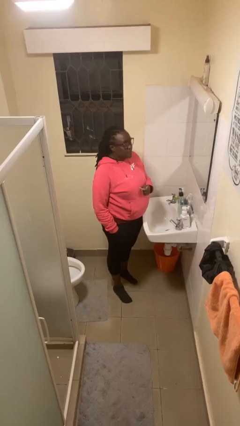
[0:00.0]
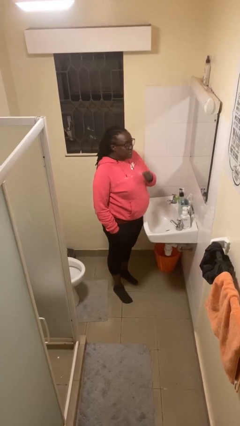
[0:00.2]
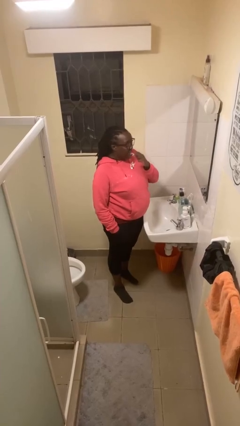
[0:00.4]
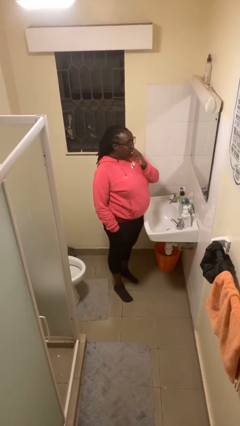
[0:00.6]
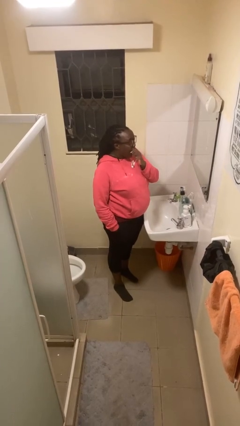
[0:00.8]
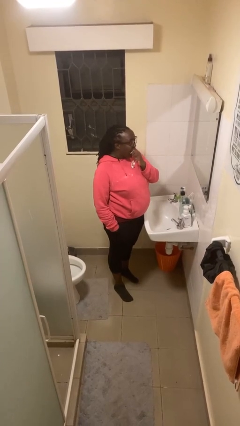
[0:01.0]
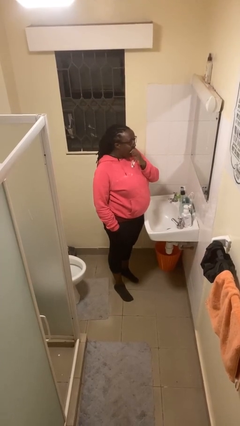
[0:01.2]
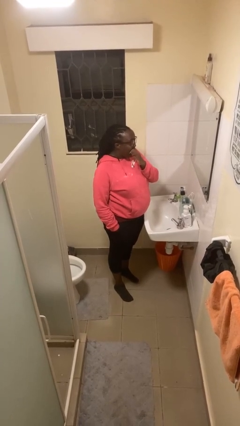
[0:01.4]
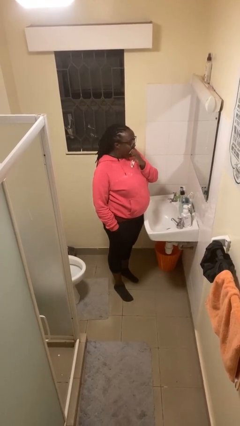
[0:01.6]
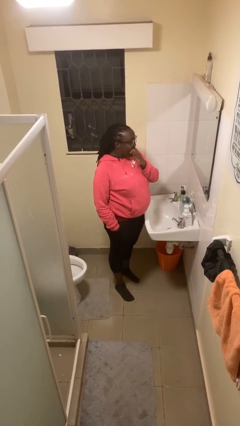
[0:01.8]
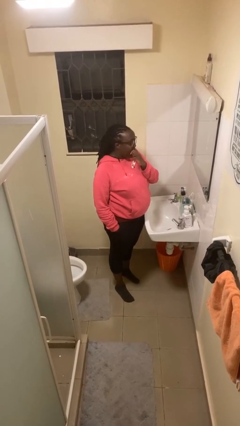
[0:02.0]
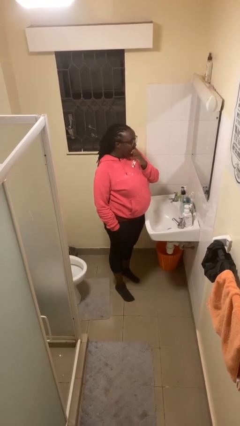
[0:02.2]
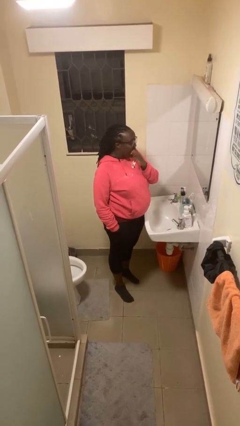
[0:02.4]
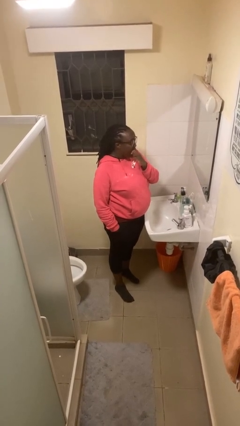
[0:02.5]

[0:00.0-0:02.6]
person flosses

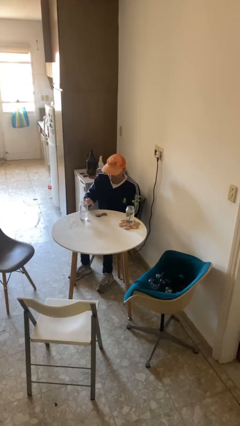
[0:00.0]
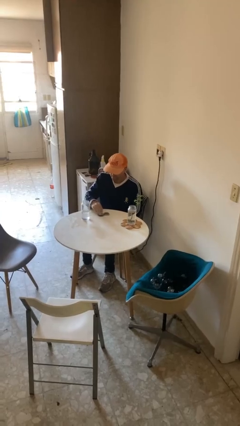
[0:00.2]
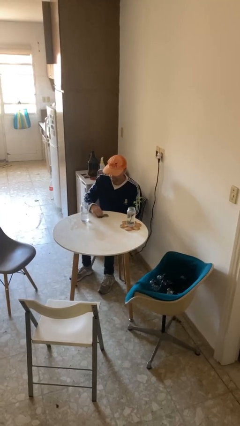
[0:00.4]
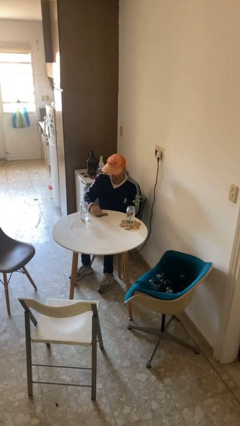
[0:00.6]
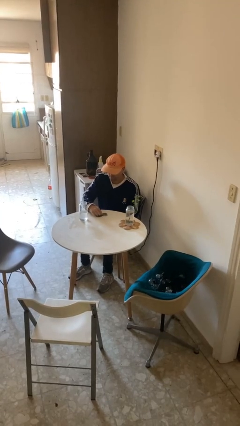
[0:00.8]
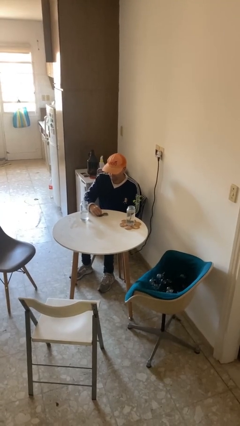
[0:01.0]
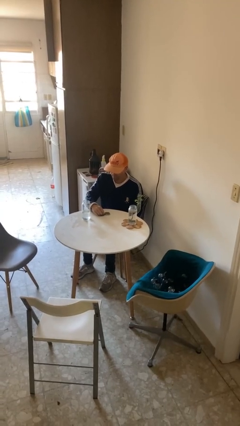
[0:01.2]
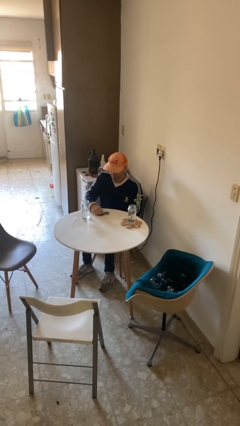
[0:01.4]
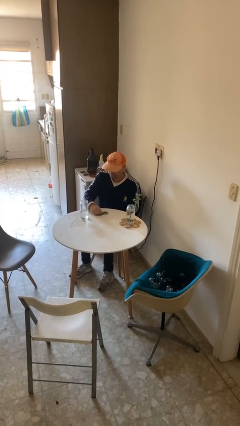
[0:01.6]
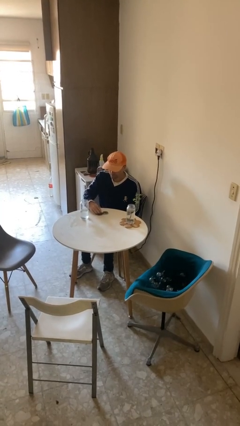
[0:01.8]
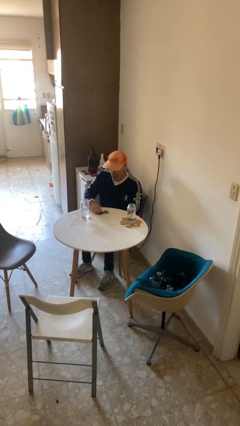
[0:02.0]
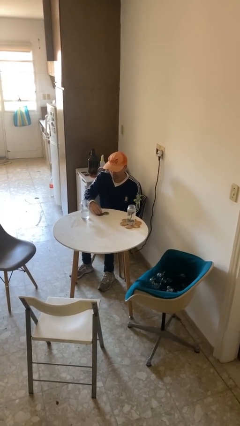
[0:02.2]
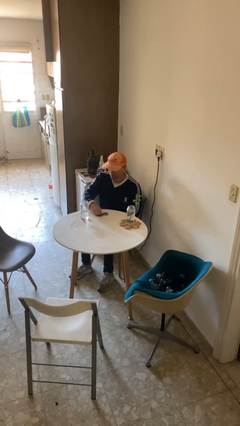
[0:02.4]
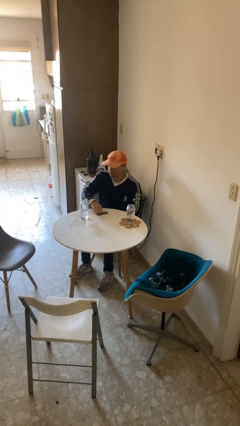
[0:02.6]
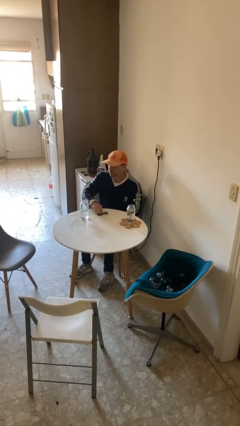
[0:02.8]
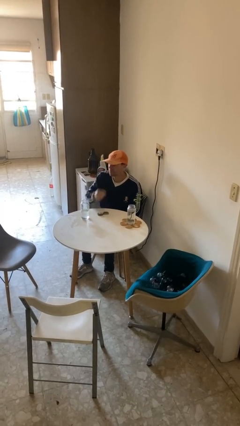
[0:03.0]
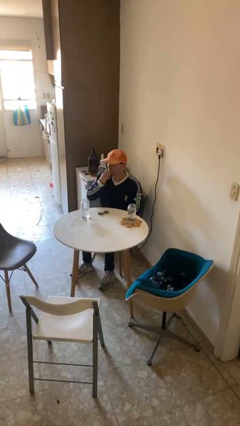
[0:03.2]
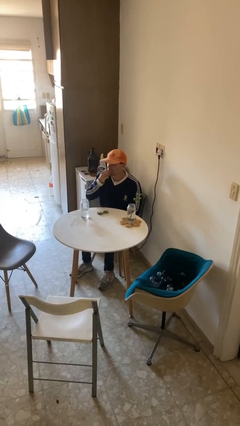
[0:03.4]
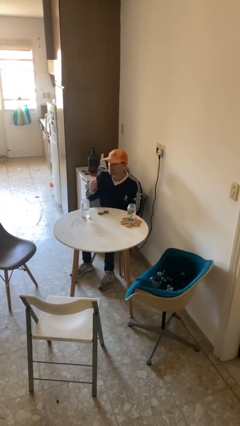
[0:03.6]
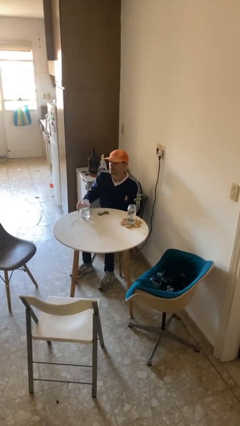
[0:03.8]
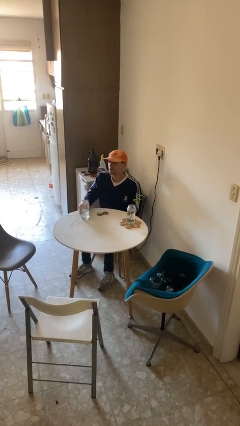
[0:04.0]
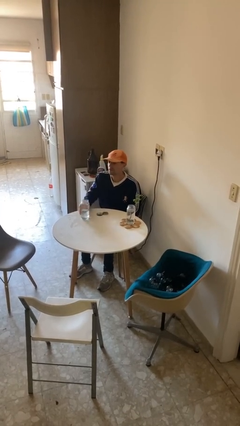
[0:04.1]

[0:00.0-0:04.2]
person takes medicine pills

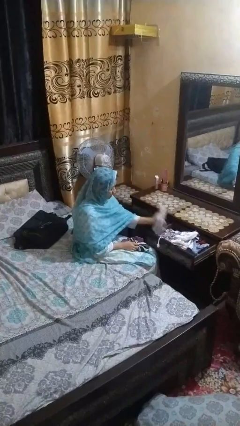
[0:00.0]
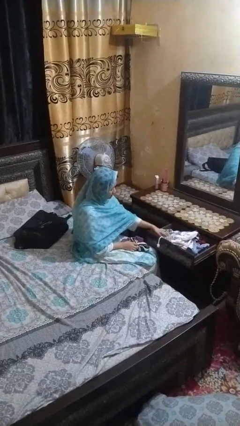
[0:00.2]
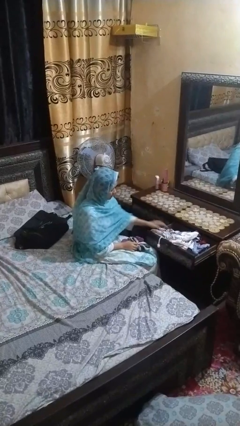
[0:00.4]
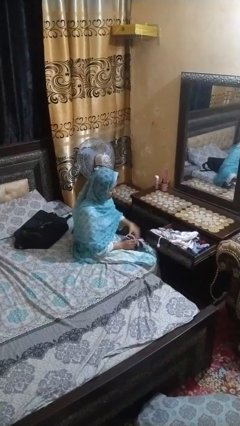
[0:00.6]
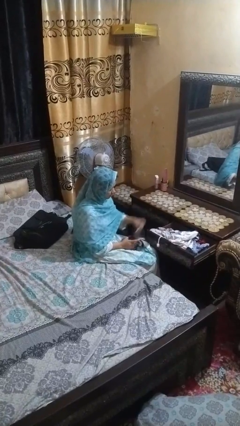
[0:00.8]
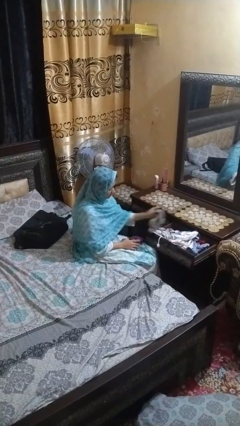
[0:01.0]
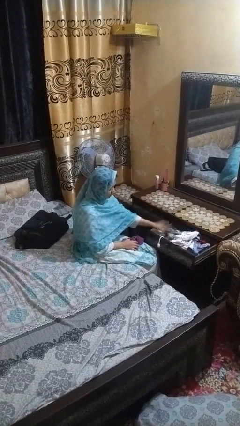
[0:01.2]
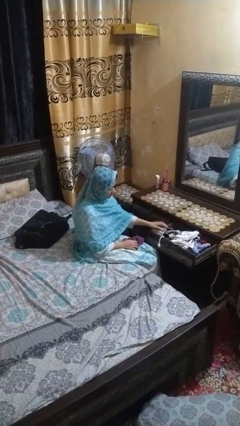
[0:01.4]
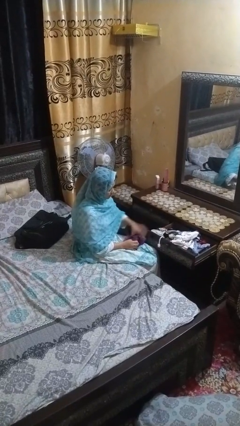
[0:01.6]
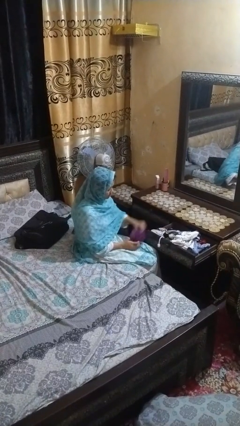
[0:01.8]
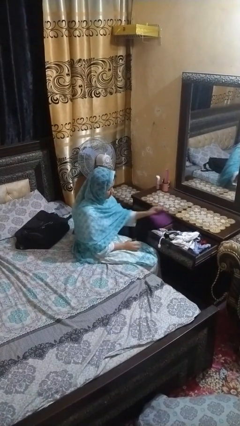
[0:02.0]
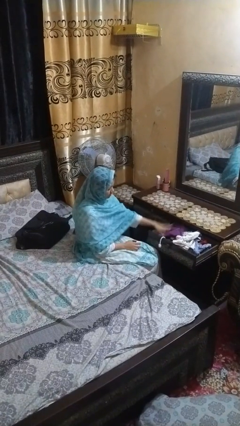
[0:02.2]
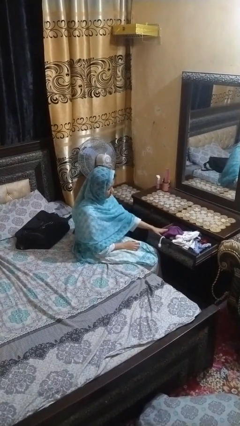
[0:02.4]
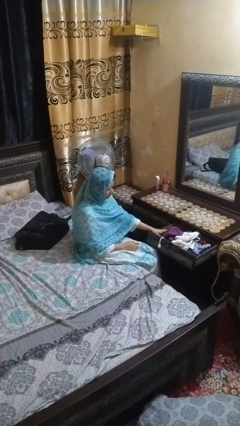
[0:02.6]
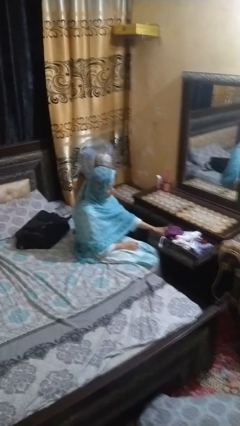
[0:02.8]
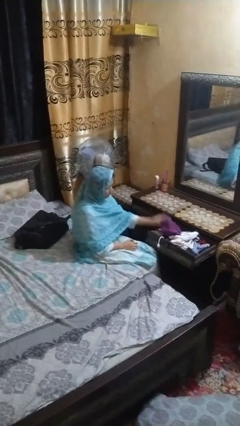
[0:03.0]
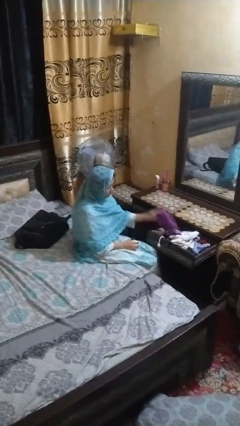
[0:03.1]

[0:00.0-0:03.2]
person puts clothes into dresser

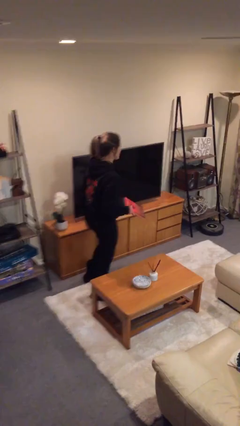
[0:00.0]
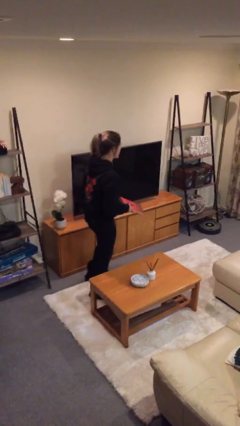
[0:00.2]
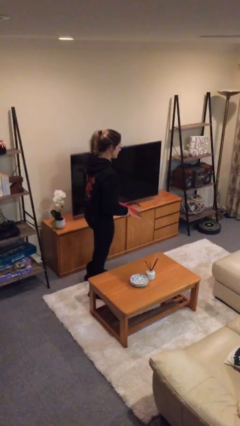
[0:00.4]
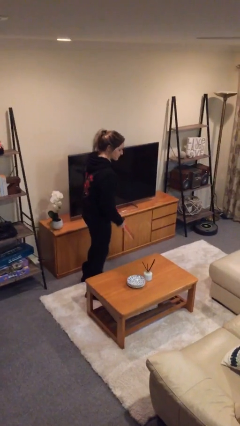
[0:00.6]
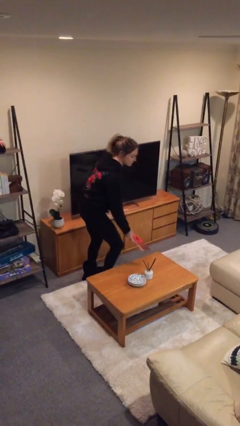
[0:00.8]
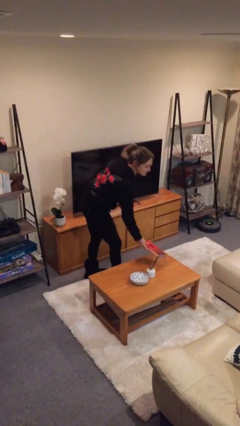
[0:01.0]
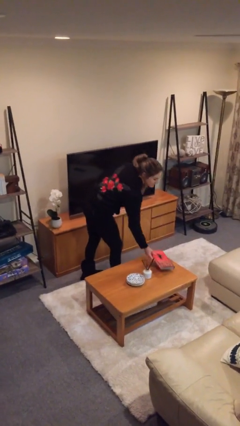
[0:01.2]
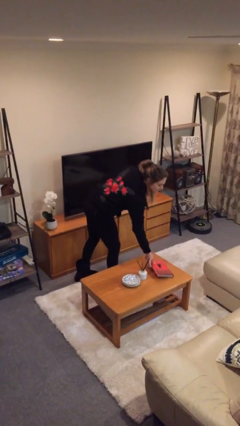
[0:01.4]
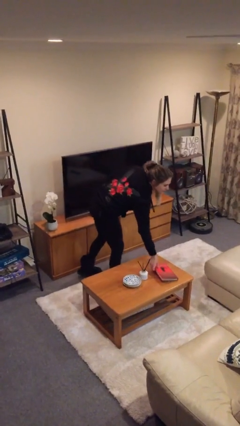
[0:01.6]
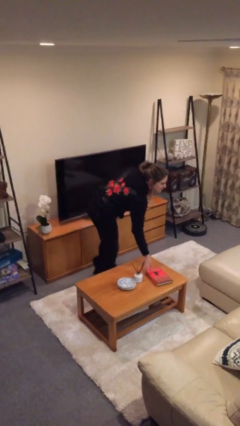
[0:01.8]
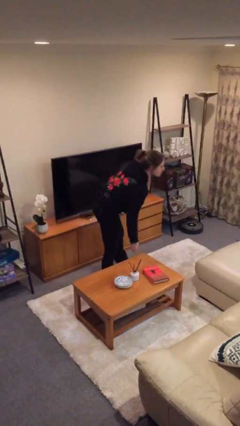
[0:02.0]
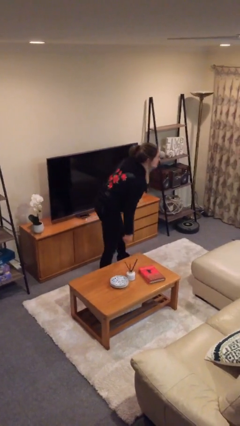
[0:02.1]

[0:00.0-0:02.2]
person puts down object on table

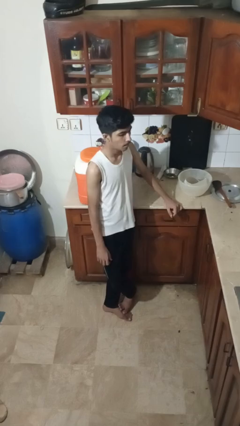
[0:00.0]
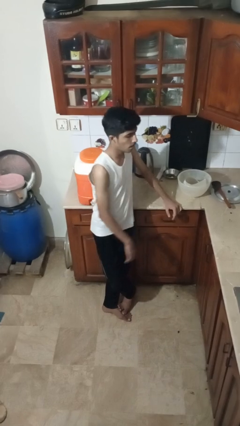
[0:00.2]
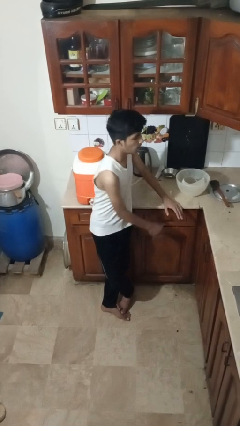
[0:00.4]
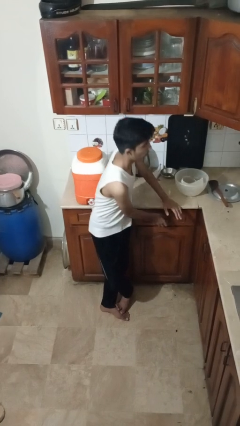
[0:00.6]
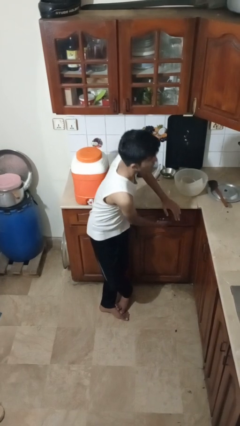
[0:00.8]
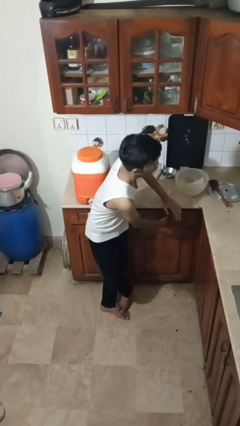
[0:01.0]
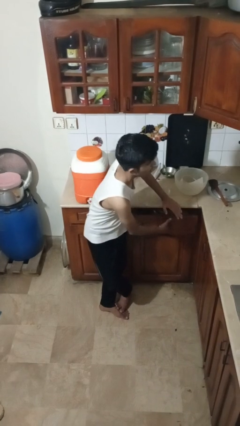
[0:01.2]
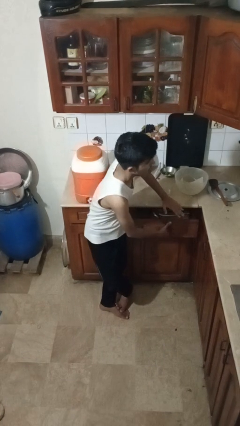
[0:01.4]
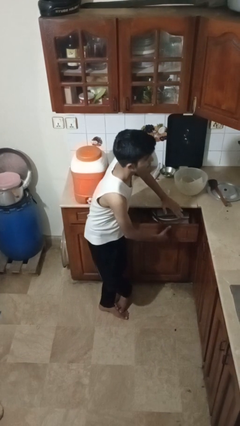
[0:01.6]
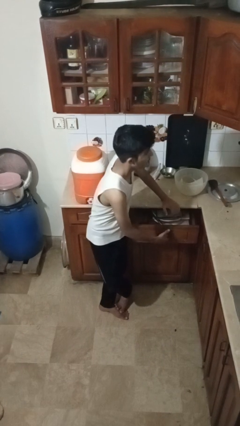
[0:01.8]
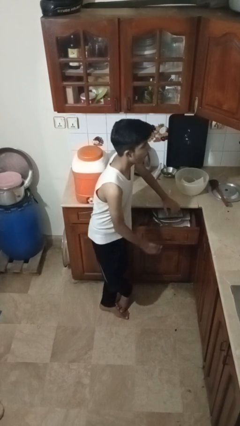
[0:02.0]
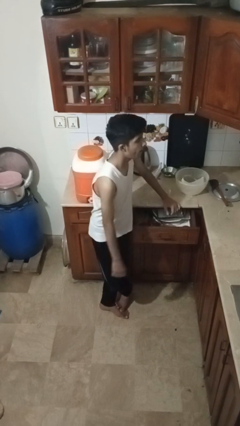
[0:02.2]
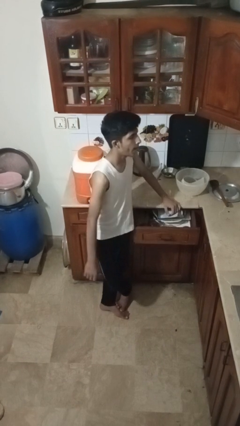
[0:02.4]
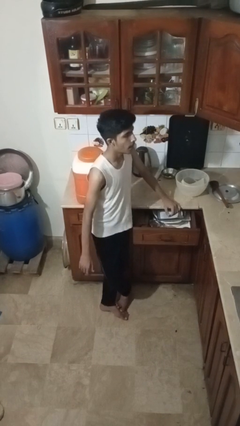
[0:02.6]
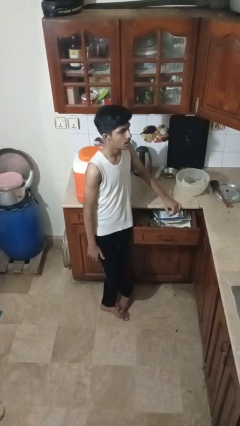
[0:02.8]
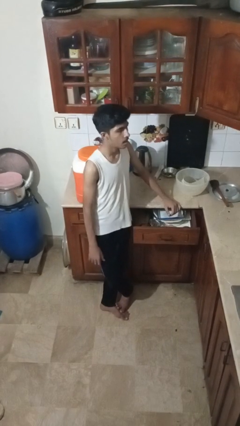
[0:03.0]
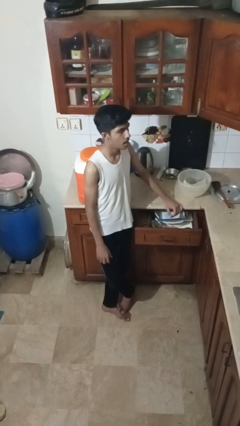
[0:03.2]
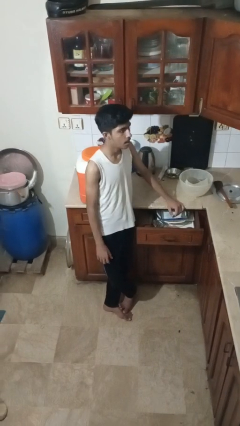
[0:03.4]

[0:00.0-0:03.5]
person opens kitchen drawer

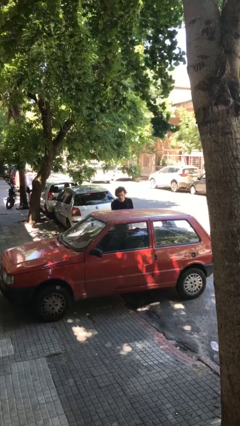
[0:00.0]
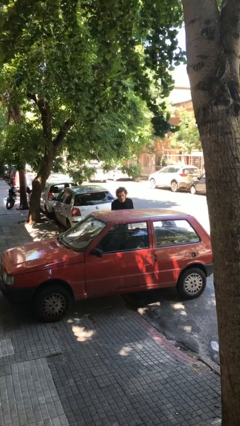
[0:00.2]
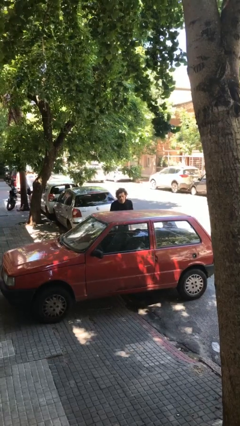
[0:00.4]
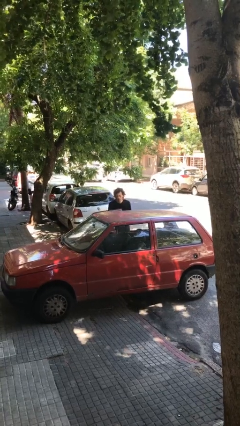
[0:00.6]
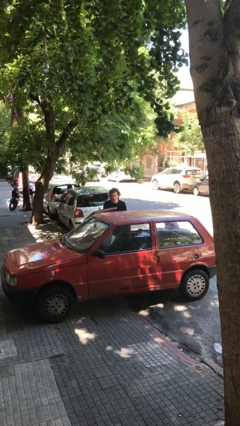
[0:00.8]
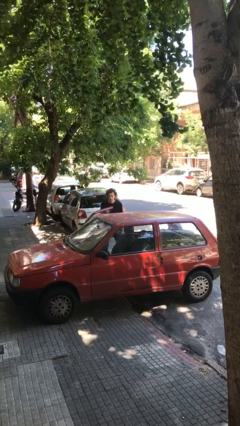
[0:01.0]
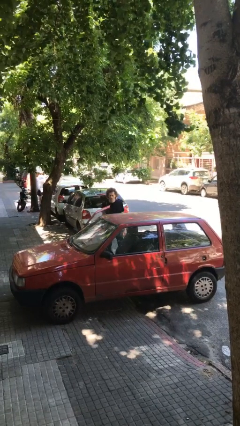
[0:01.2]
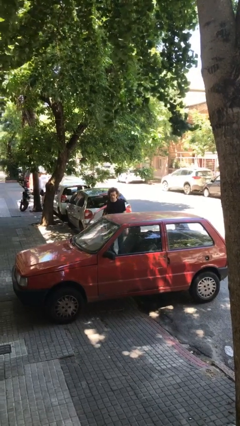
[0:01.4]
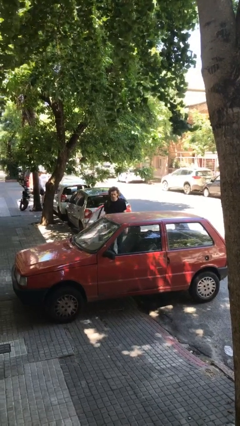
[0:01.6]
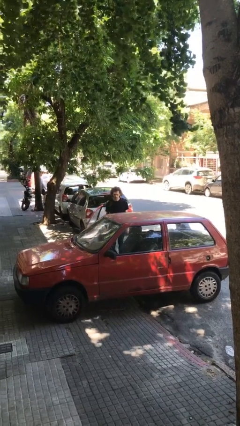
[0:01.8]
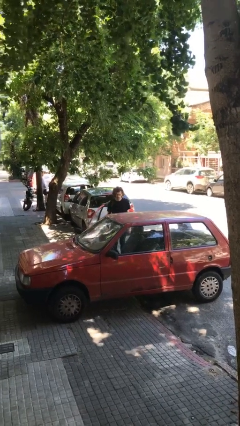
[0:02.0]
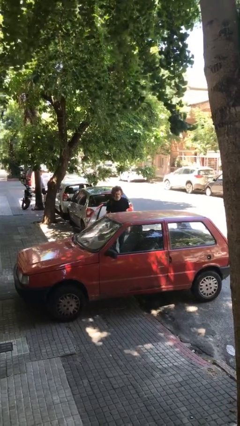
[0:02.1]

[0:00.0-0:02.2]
person opens car door
